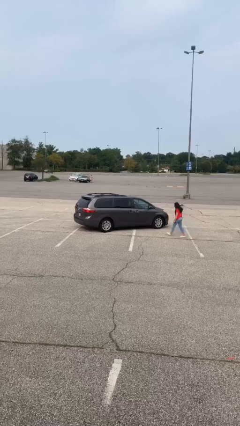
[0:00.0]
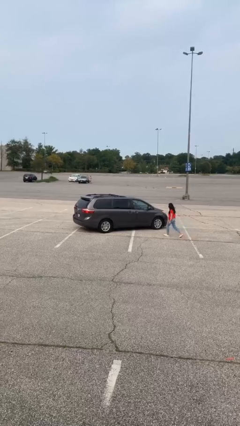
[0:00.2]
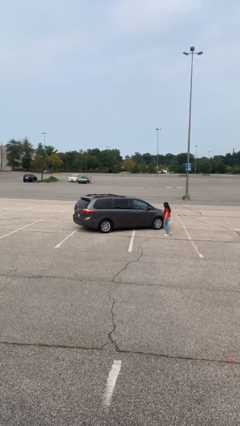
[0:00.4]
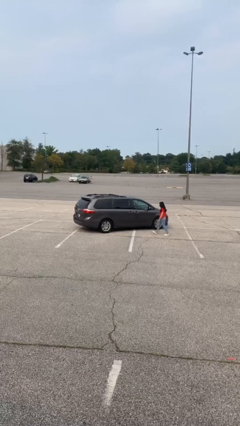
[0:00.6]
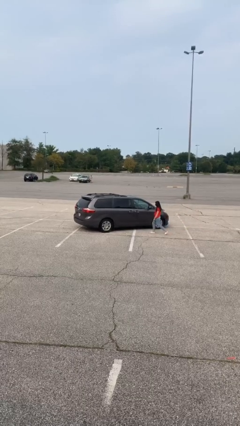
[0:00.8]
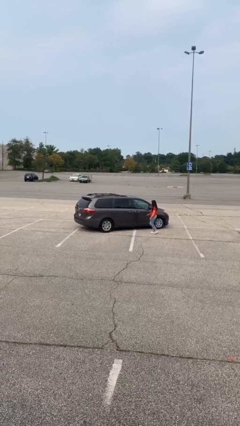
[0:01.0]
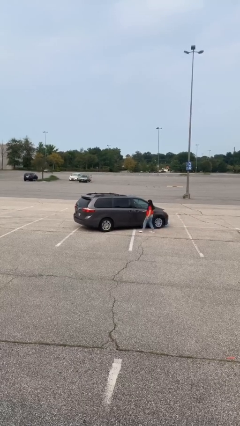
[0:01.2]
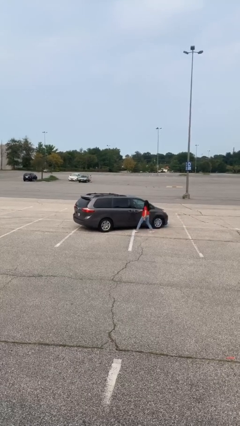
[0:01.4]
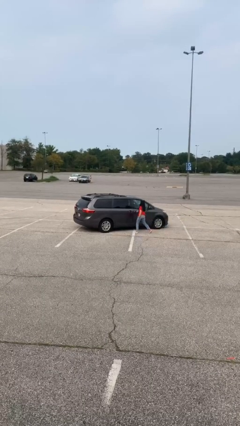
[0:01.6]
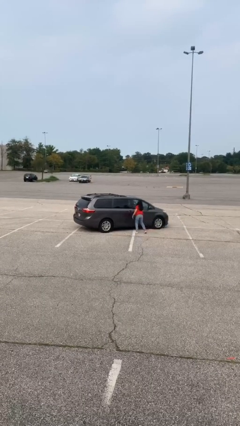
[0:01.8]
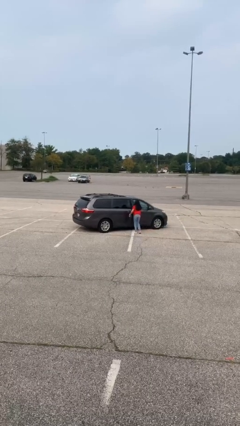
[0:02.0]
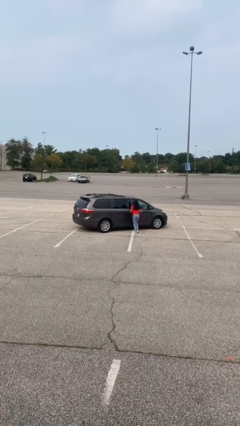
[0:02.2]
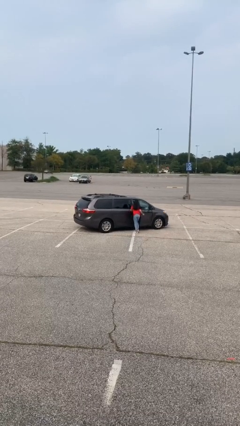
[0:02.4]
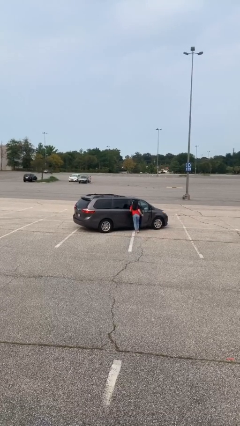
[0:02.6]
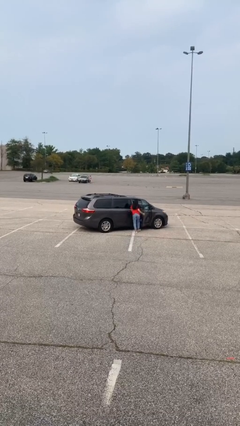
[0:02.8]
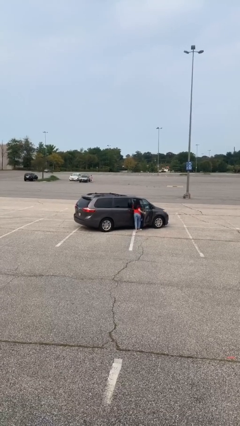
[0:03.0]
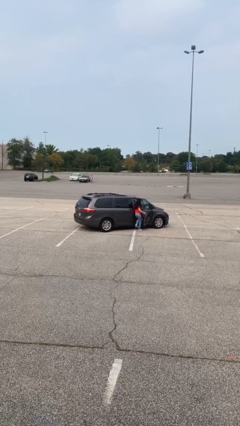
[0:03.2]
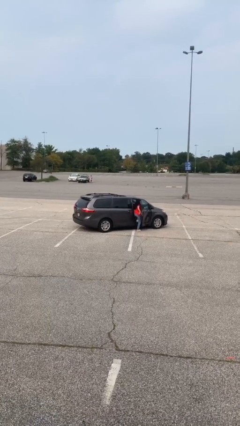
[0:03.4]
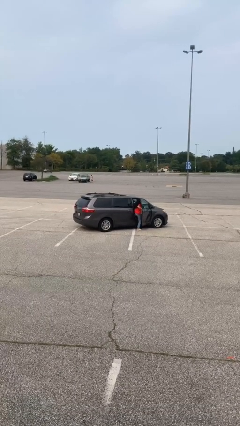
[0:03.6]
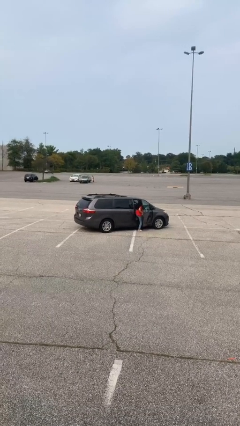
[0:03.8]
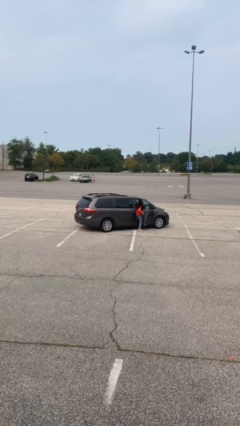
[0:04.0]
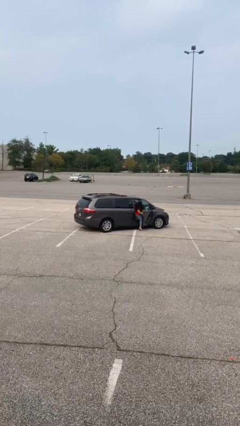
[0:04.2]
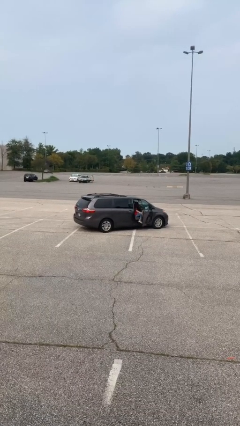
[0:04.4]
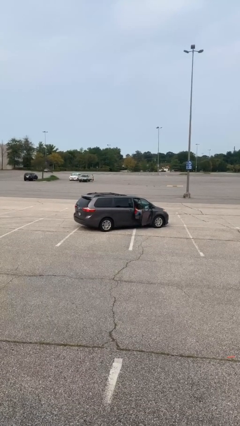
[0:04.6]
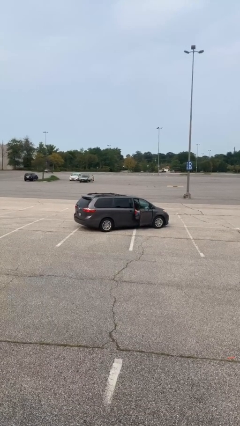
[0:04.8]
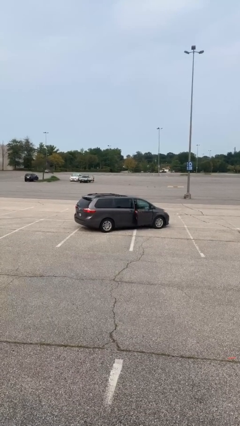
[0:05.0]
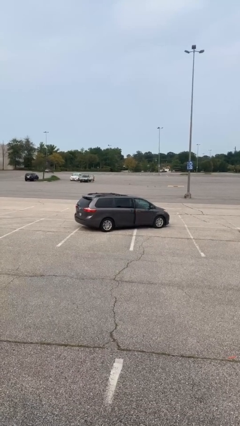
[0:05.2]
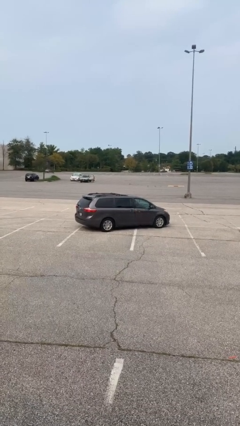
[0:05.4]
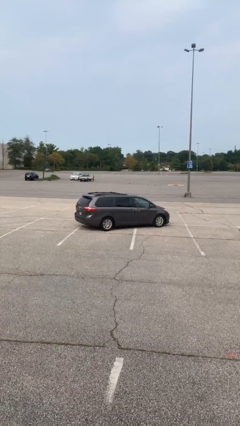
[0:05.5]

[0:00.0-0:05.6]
car picks up person

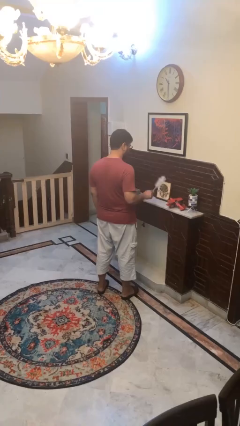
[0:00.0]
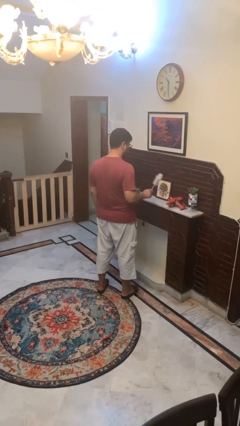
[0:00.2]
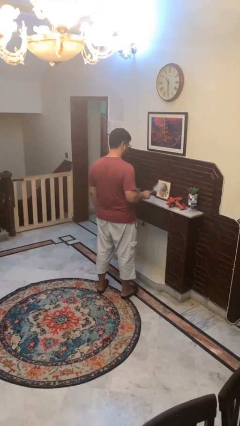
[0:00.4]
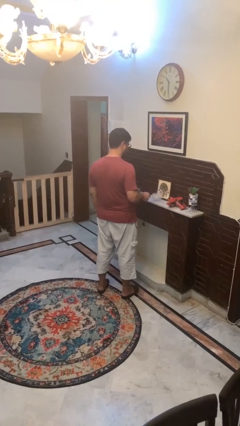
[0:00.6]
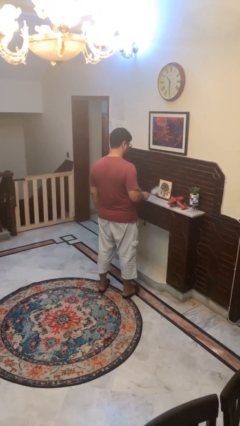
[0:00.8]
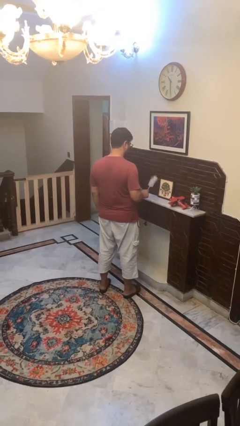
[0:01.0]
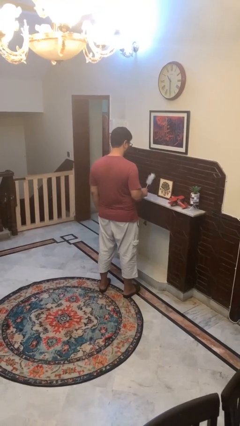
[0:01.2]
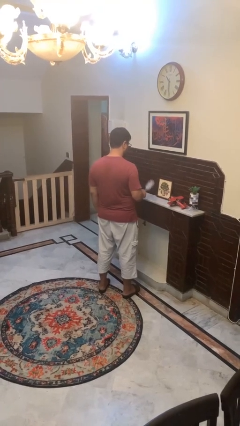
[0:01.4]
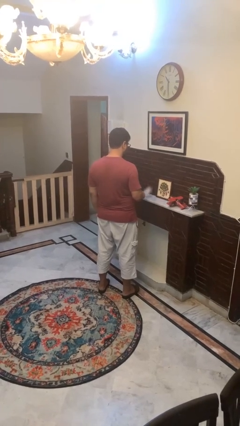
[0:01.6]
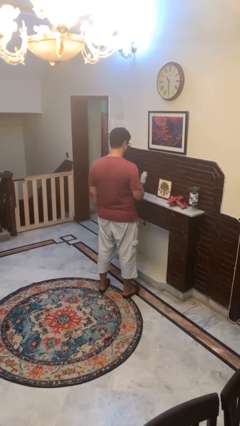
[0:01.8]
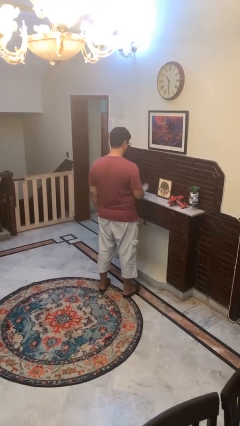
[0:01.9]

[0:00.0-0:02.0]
person dusts furniture

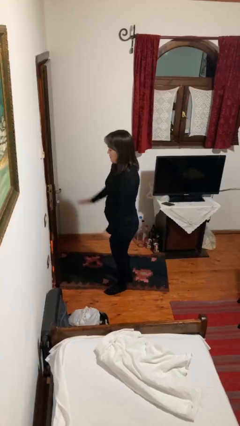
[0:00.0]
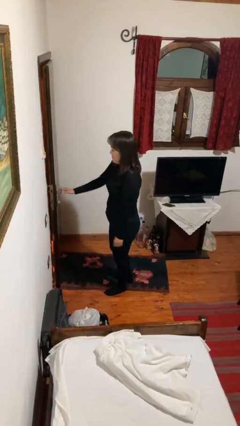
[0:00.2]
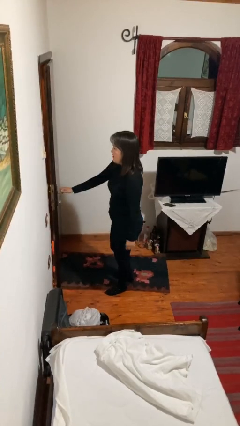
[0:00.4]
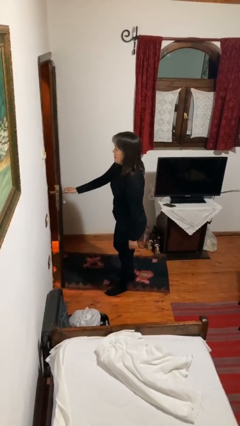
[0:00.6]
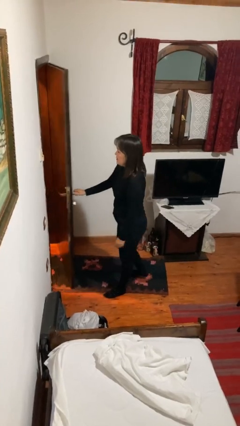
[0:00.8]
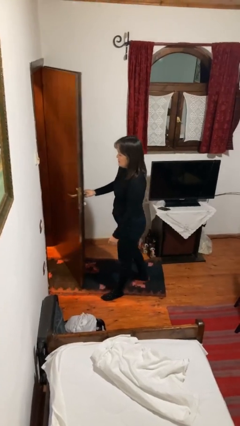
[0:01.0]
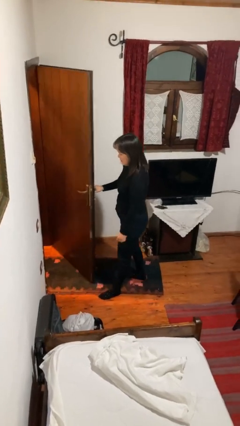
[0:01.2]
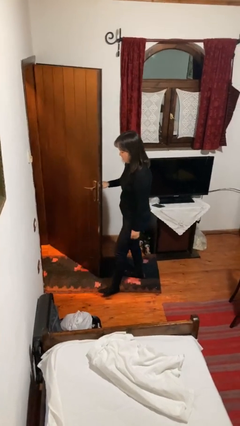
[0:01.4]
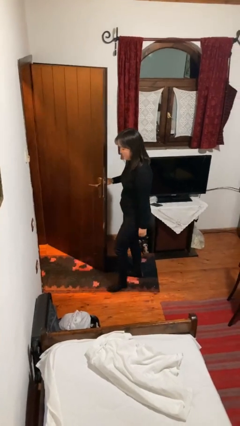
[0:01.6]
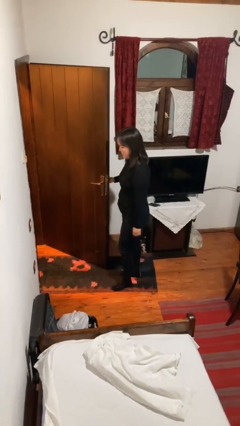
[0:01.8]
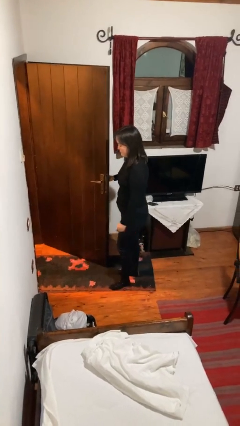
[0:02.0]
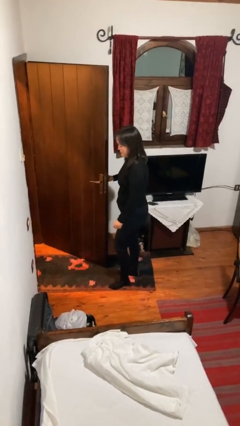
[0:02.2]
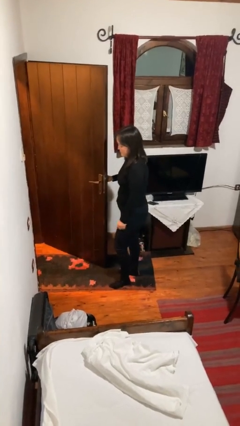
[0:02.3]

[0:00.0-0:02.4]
person opens facility door

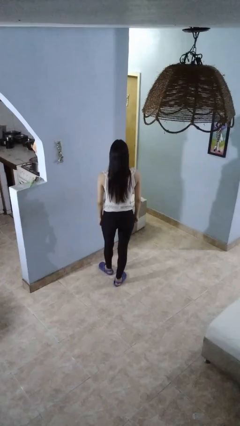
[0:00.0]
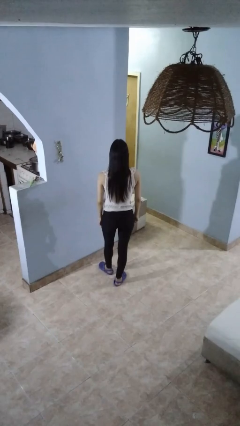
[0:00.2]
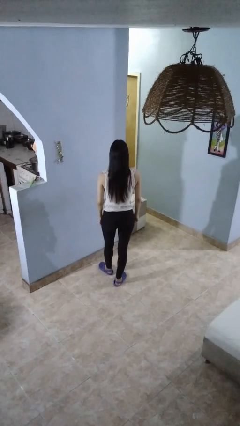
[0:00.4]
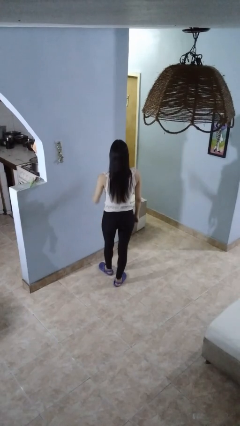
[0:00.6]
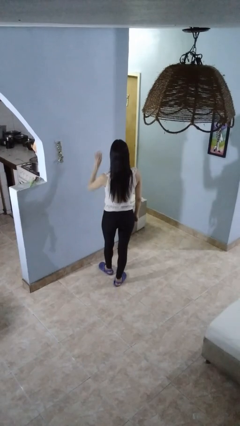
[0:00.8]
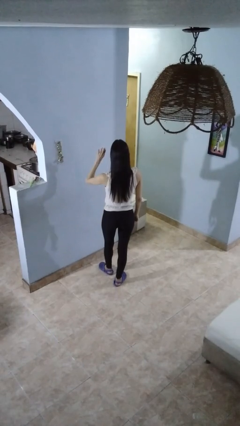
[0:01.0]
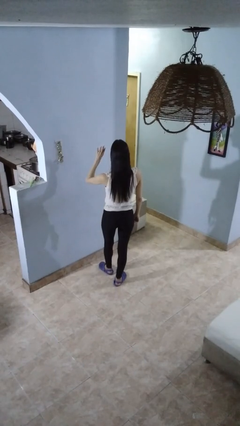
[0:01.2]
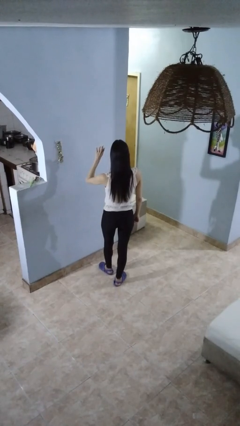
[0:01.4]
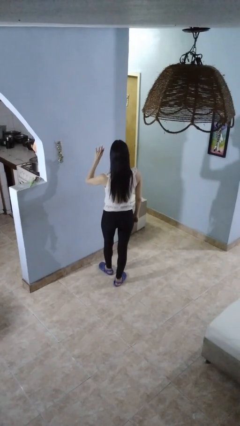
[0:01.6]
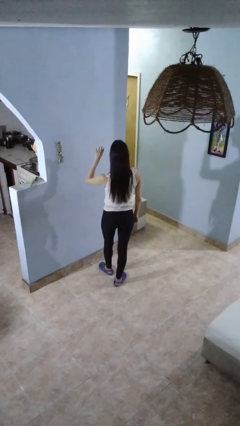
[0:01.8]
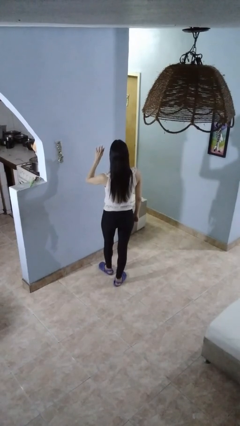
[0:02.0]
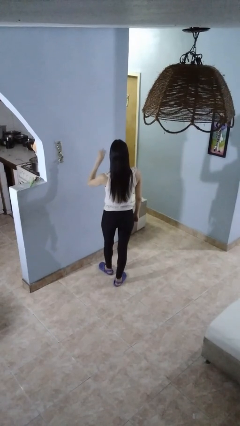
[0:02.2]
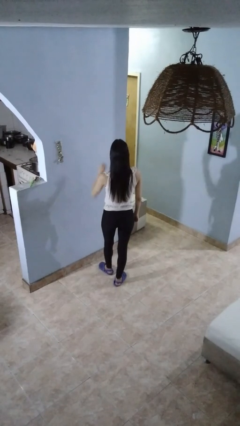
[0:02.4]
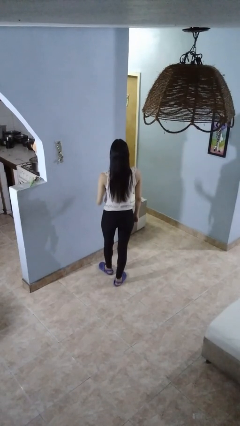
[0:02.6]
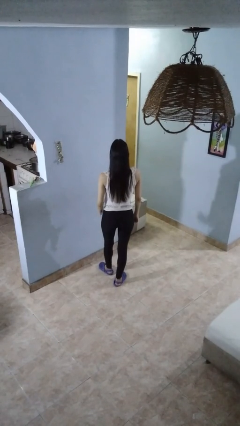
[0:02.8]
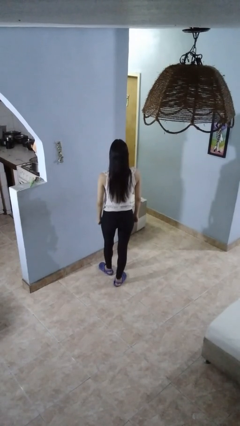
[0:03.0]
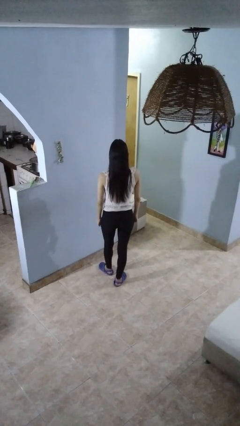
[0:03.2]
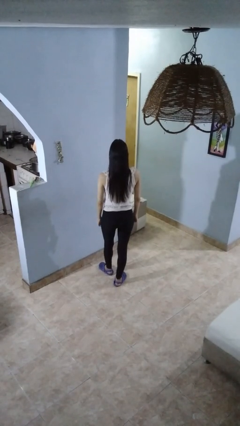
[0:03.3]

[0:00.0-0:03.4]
person gestures number four

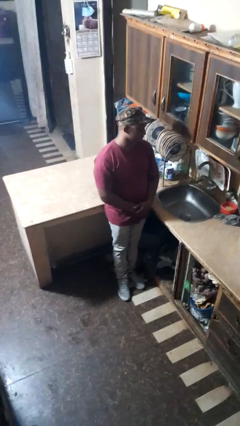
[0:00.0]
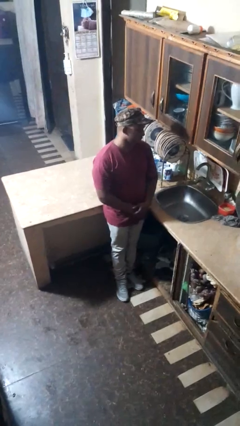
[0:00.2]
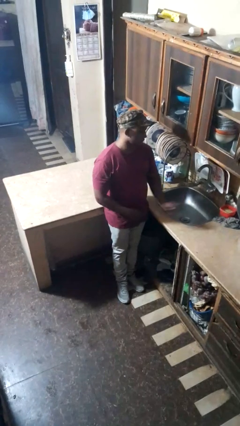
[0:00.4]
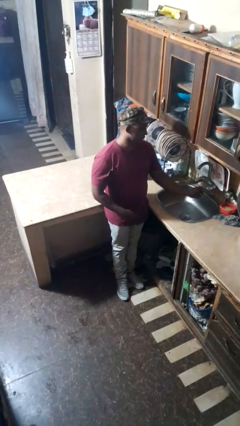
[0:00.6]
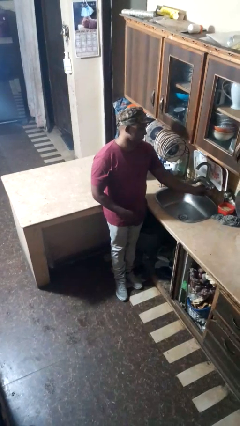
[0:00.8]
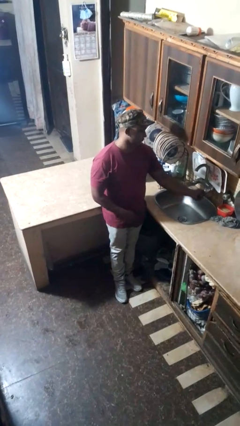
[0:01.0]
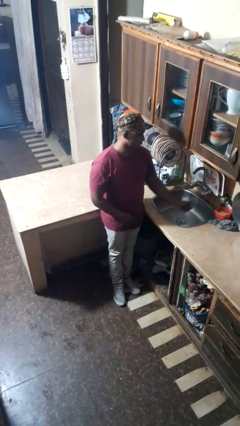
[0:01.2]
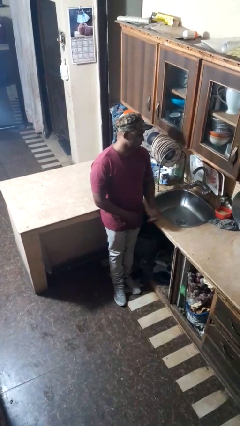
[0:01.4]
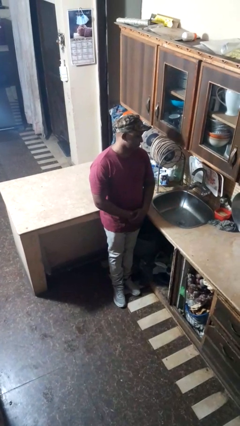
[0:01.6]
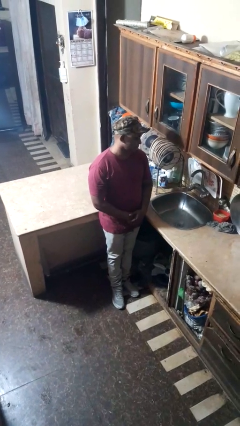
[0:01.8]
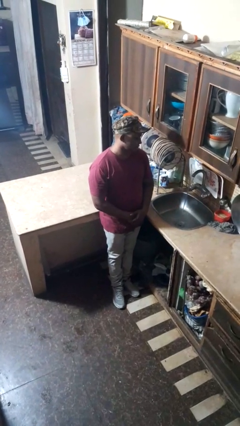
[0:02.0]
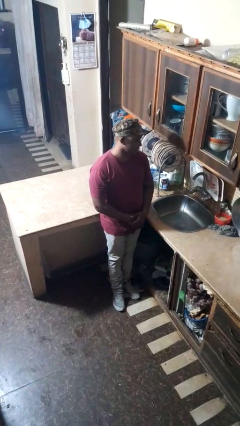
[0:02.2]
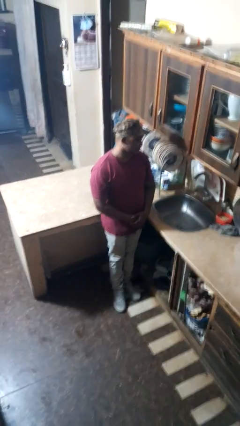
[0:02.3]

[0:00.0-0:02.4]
person turns on faucet

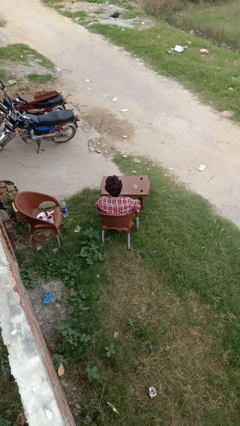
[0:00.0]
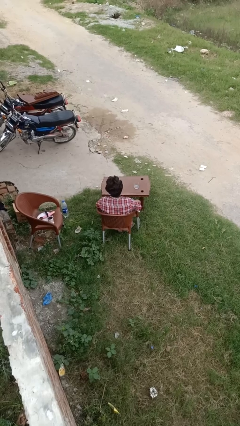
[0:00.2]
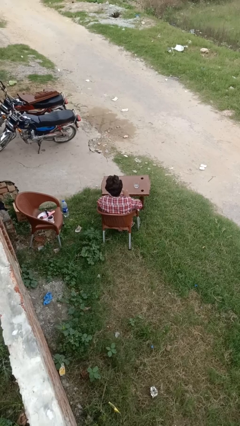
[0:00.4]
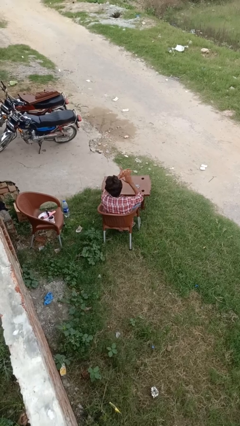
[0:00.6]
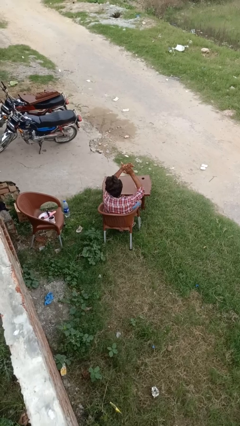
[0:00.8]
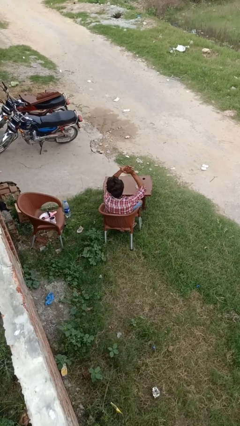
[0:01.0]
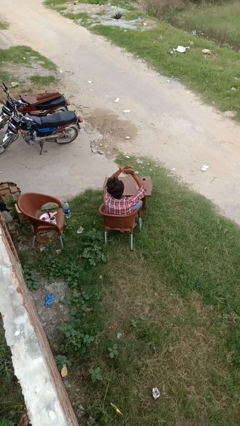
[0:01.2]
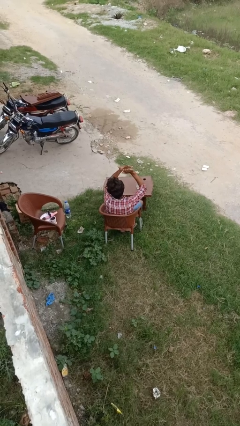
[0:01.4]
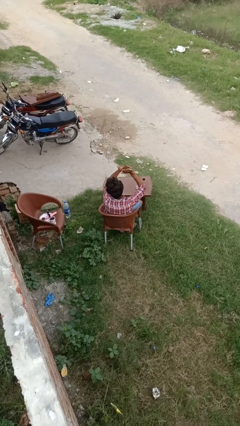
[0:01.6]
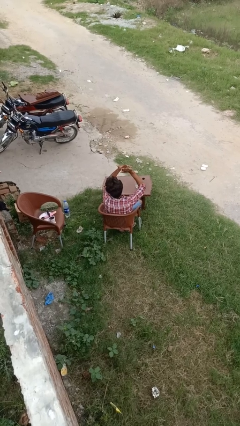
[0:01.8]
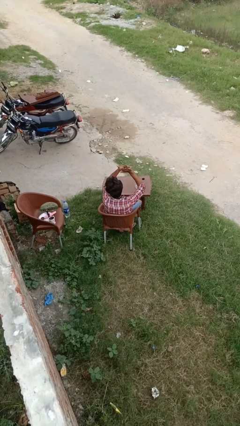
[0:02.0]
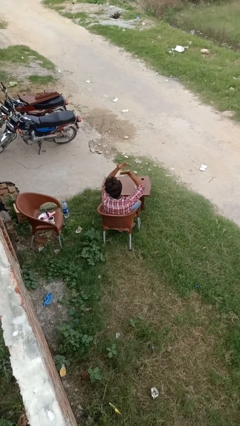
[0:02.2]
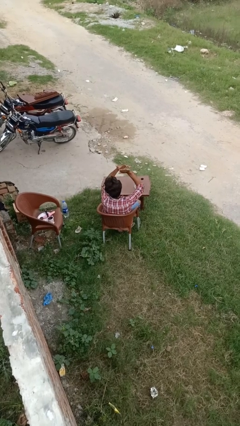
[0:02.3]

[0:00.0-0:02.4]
person claps hands
